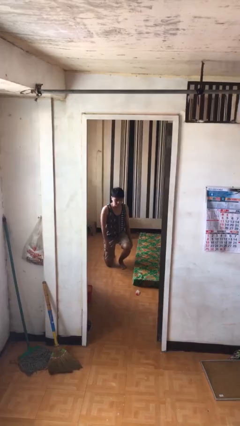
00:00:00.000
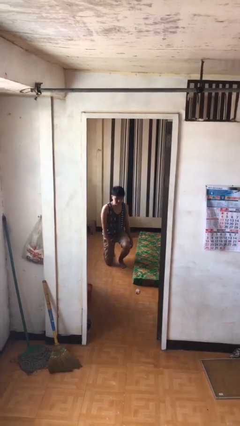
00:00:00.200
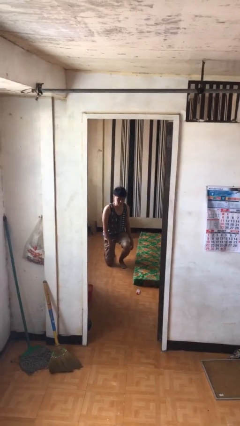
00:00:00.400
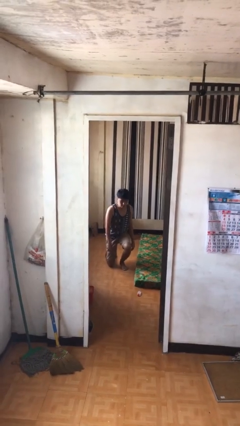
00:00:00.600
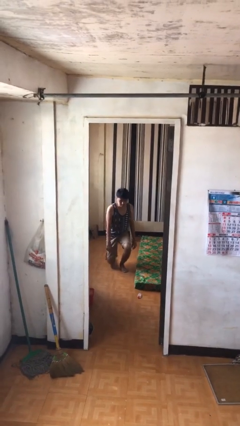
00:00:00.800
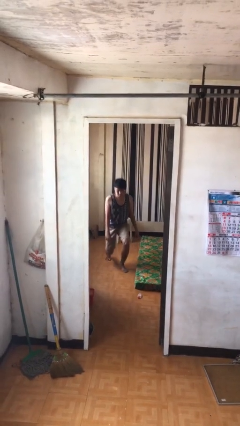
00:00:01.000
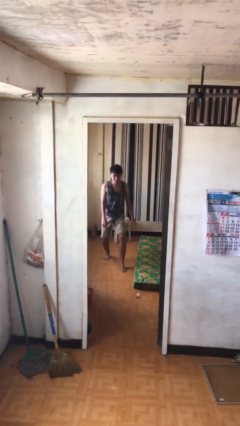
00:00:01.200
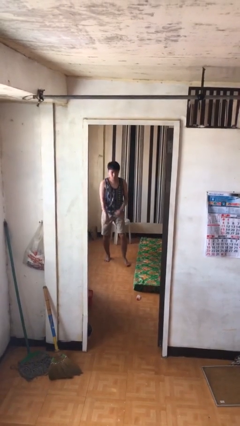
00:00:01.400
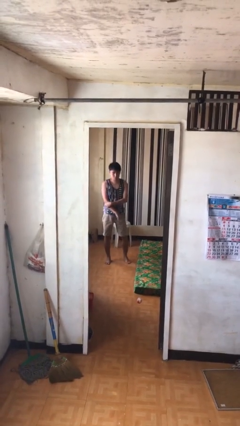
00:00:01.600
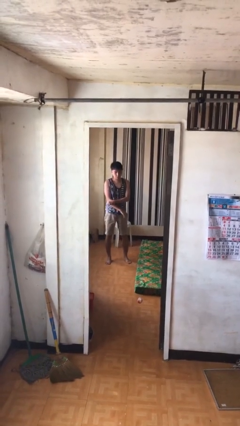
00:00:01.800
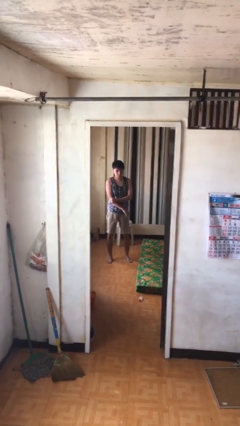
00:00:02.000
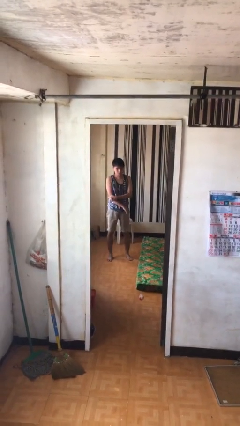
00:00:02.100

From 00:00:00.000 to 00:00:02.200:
person stands up from floor

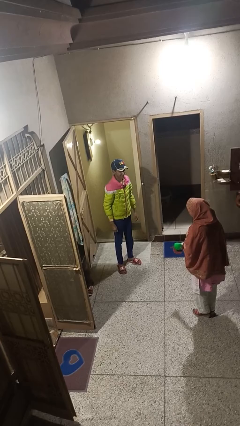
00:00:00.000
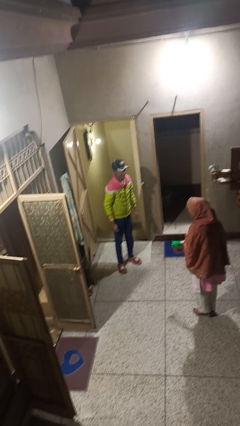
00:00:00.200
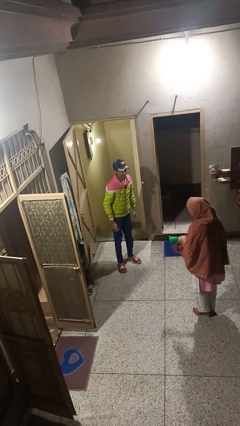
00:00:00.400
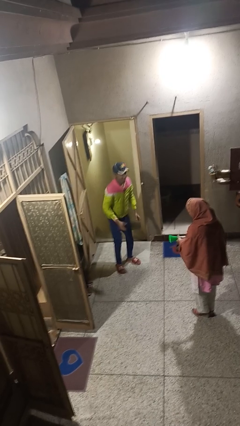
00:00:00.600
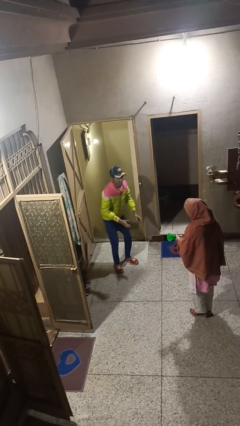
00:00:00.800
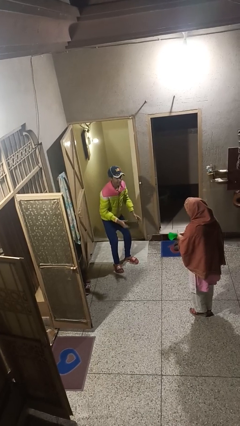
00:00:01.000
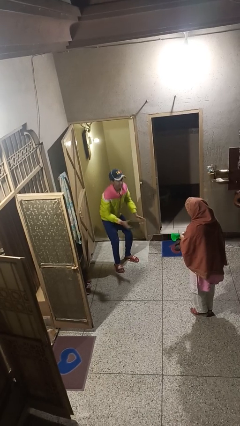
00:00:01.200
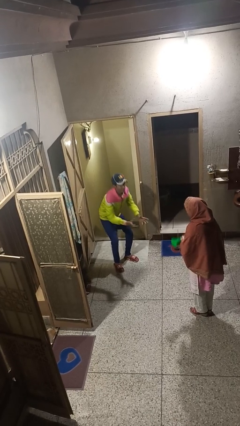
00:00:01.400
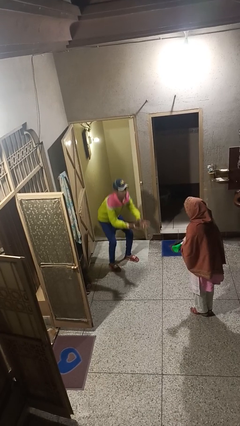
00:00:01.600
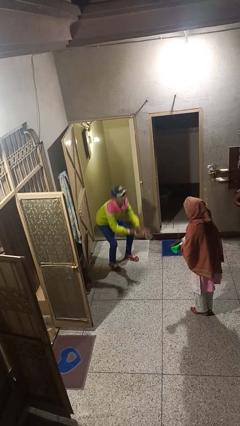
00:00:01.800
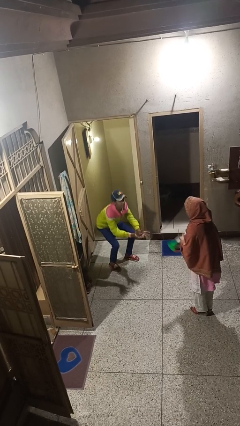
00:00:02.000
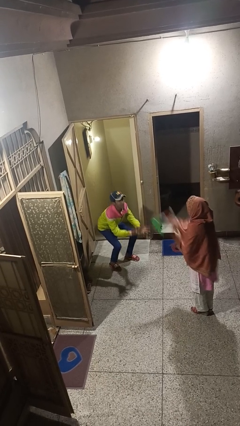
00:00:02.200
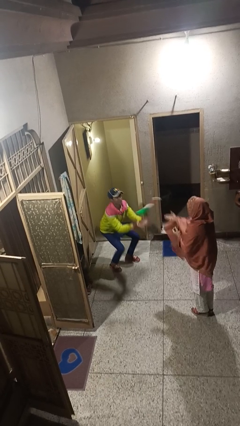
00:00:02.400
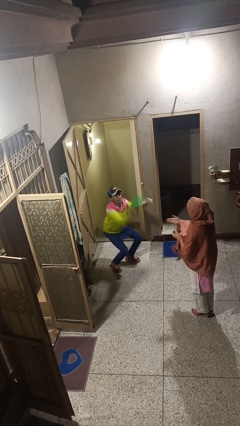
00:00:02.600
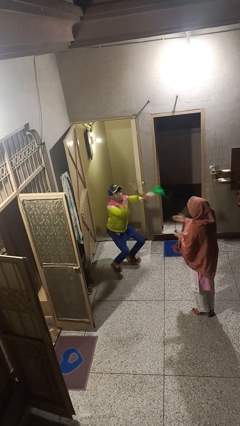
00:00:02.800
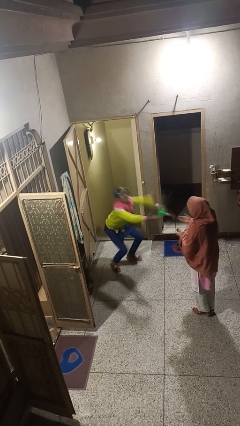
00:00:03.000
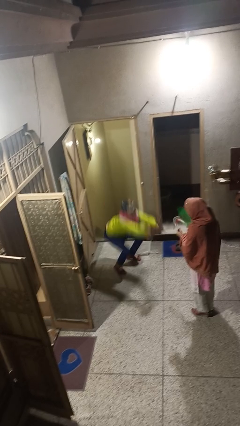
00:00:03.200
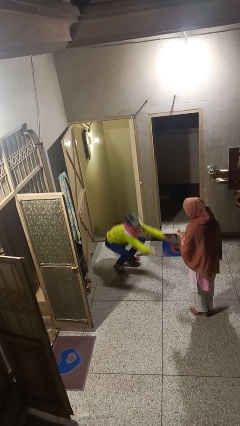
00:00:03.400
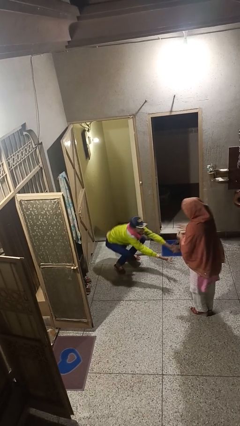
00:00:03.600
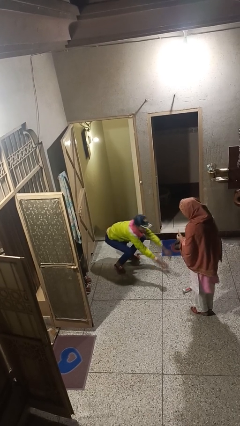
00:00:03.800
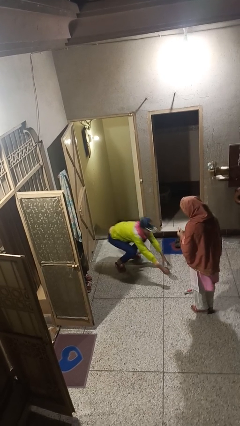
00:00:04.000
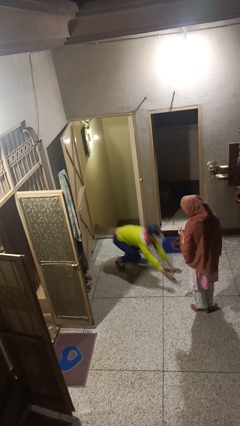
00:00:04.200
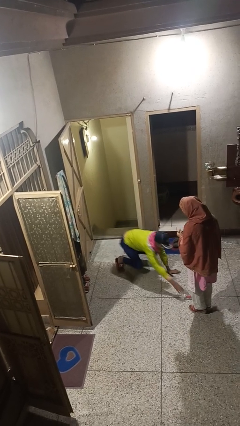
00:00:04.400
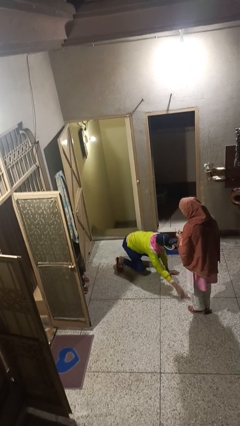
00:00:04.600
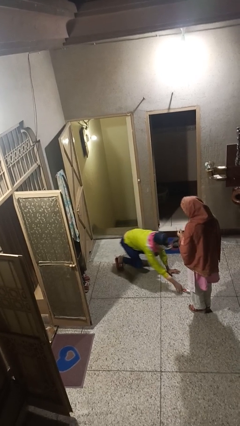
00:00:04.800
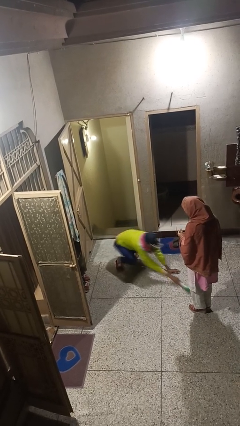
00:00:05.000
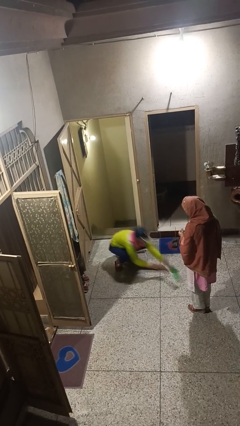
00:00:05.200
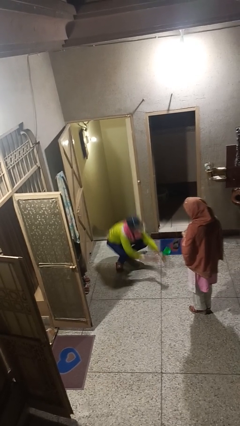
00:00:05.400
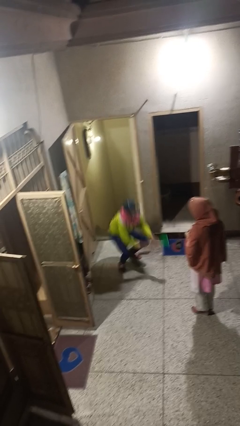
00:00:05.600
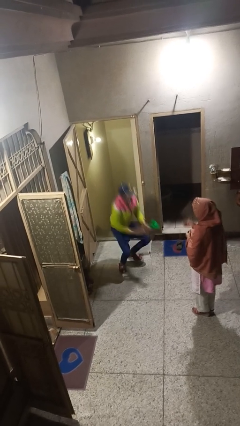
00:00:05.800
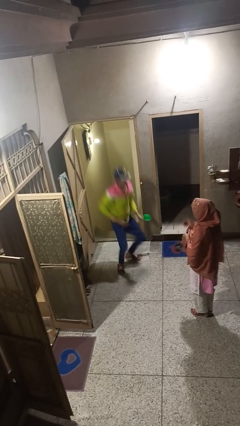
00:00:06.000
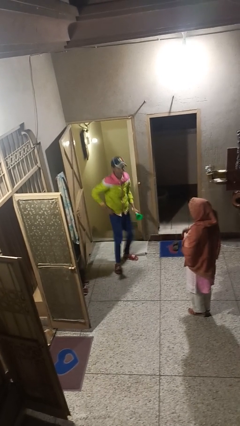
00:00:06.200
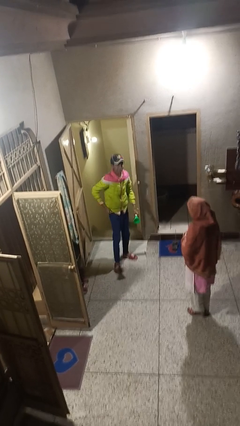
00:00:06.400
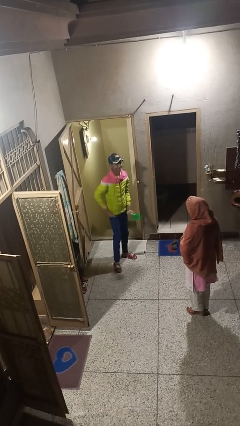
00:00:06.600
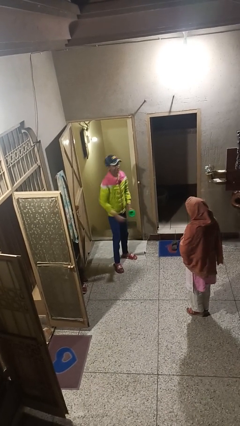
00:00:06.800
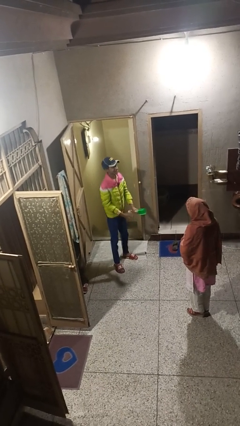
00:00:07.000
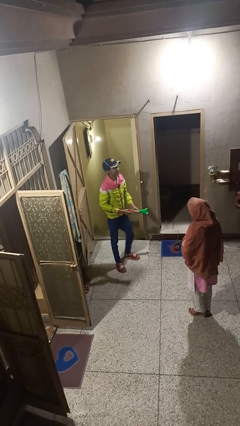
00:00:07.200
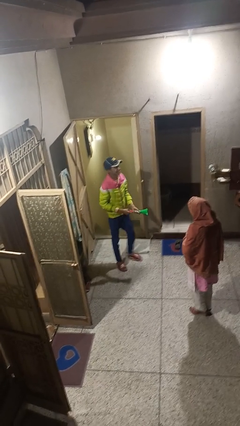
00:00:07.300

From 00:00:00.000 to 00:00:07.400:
person catches object from person

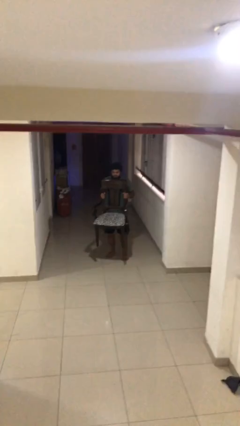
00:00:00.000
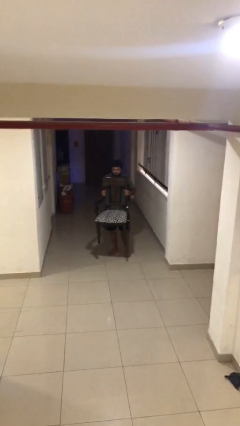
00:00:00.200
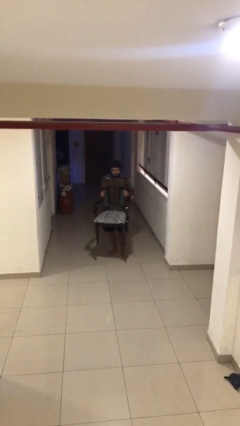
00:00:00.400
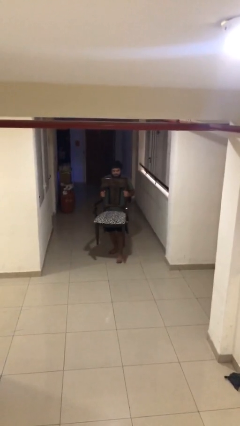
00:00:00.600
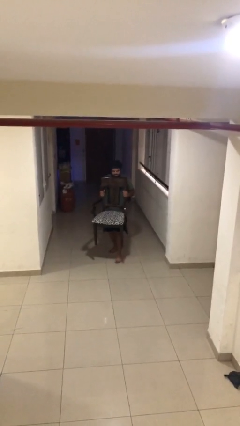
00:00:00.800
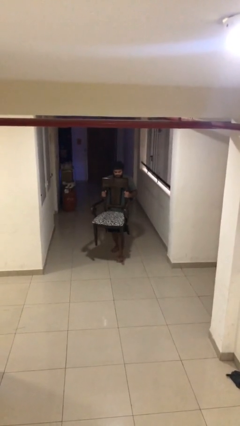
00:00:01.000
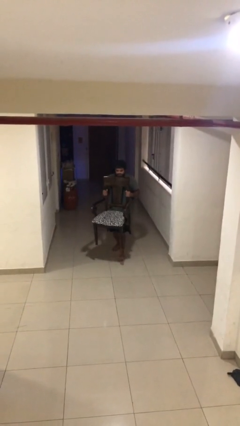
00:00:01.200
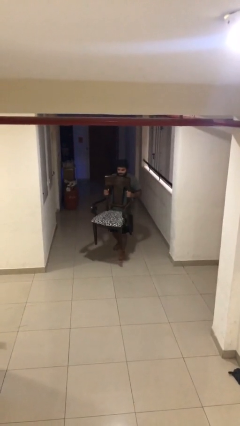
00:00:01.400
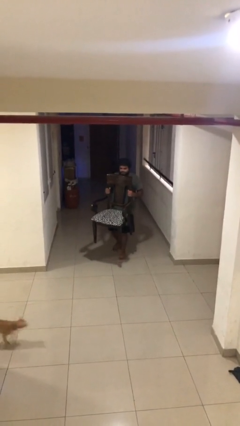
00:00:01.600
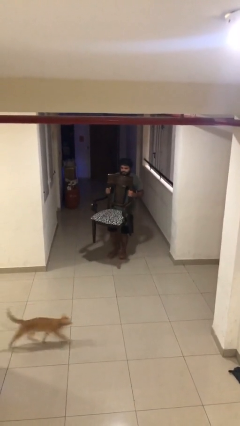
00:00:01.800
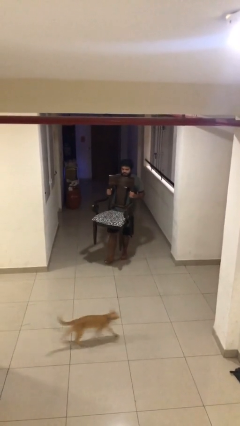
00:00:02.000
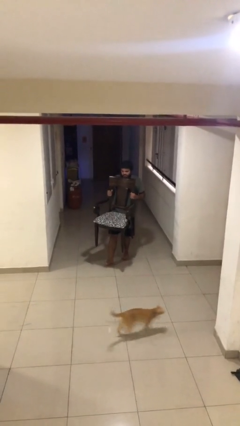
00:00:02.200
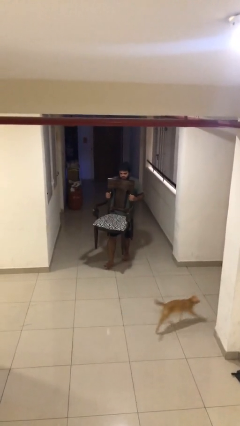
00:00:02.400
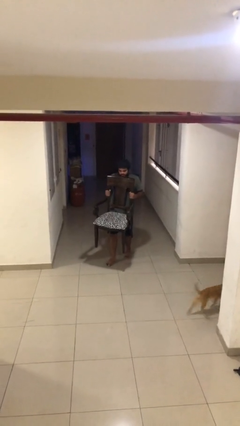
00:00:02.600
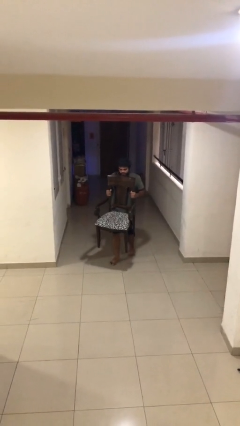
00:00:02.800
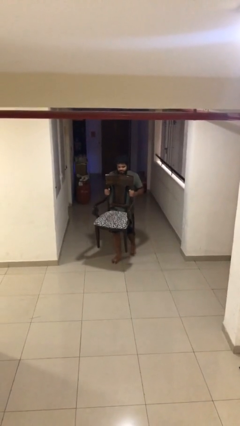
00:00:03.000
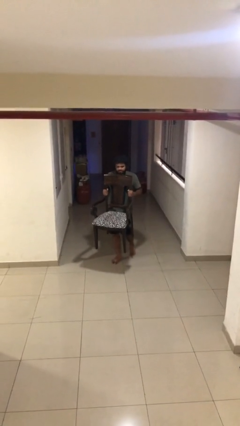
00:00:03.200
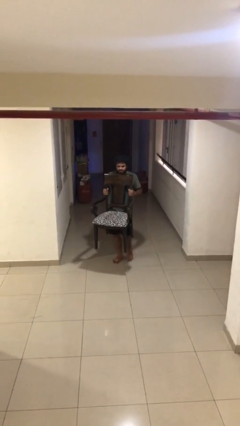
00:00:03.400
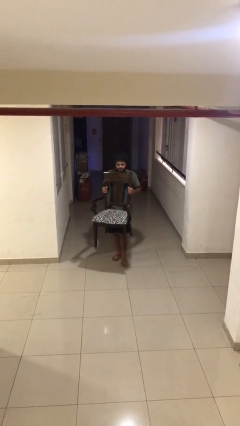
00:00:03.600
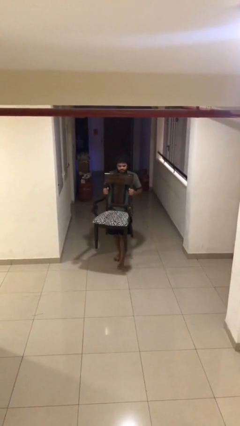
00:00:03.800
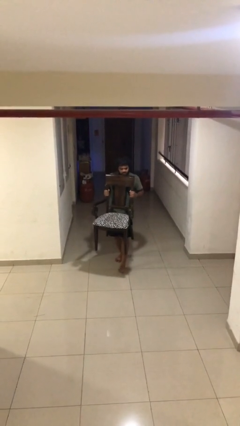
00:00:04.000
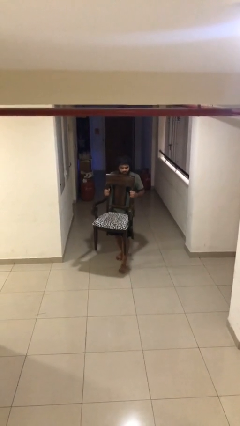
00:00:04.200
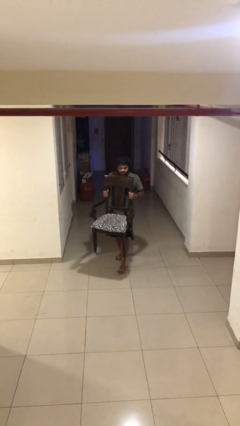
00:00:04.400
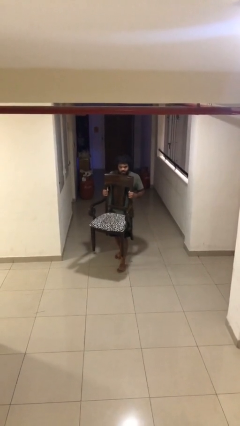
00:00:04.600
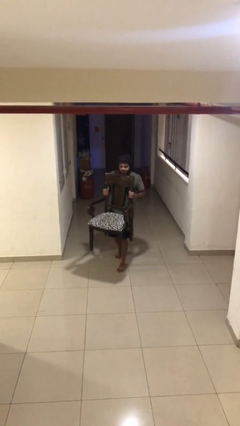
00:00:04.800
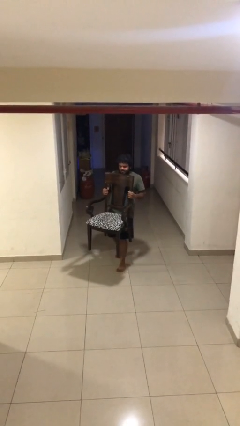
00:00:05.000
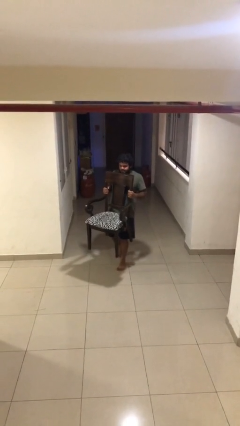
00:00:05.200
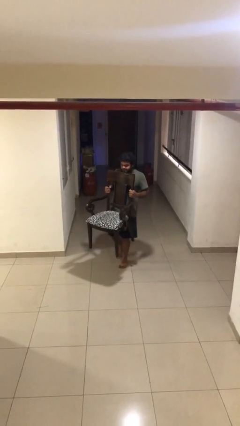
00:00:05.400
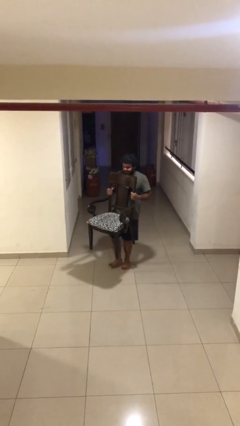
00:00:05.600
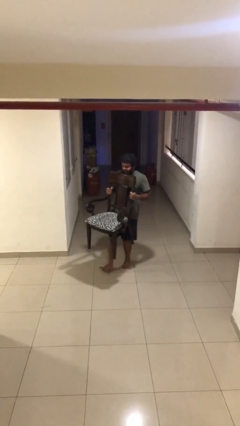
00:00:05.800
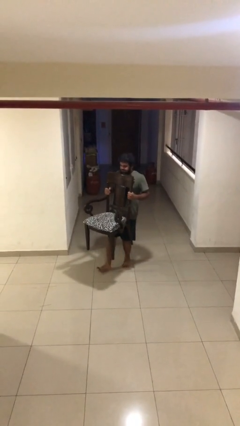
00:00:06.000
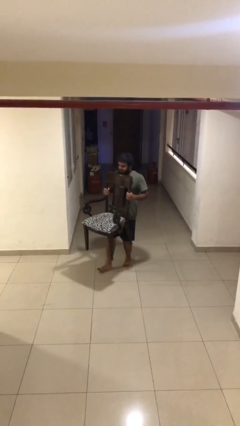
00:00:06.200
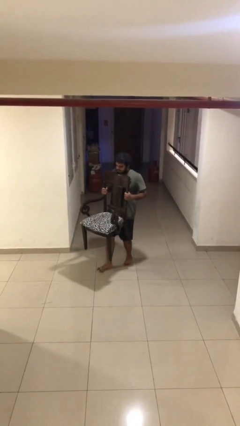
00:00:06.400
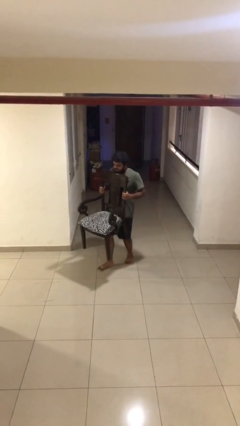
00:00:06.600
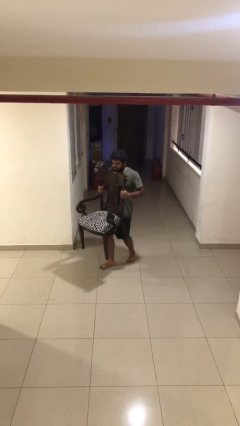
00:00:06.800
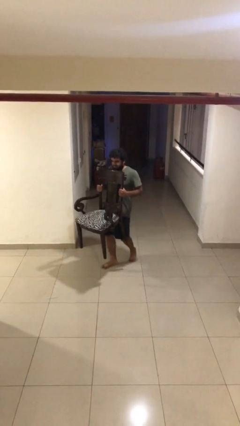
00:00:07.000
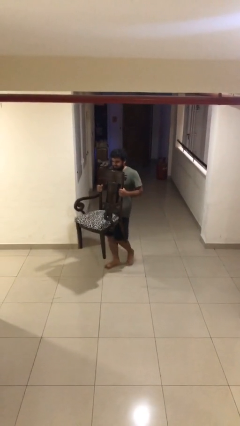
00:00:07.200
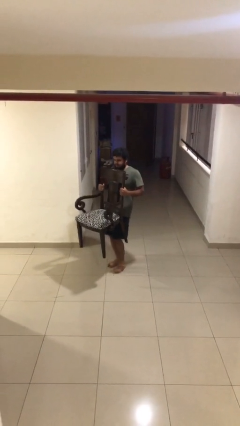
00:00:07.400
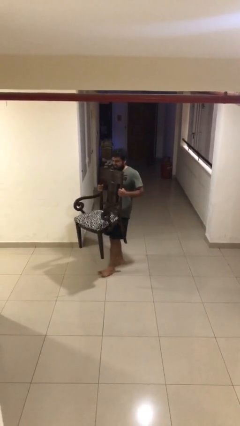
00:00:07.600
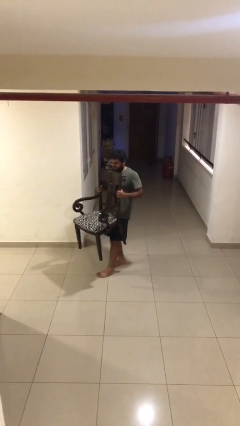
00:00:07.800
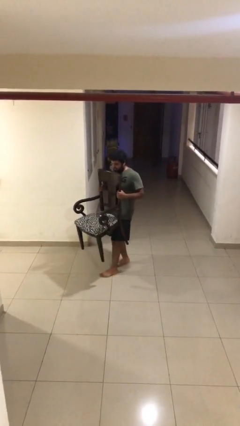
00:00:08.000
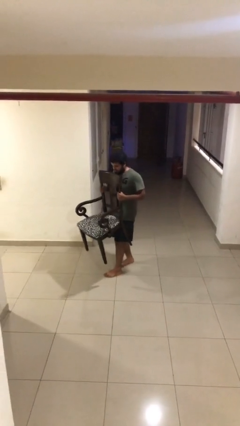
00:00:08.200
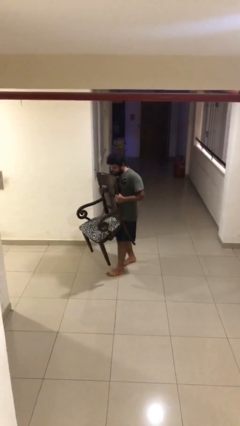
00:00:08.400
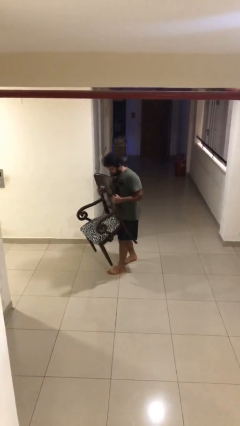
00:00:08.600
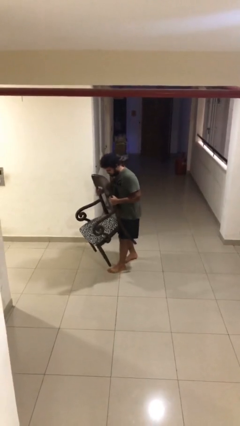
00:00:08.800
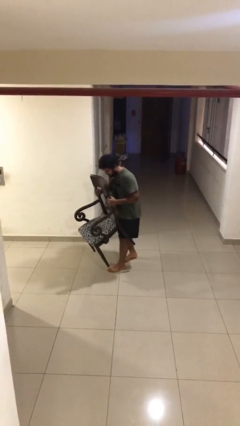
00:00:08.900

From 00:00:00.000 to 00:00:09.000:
person carries heavy object
